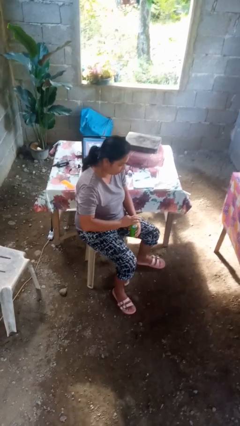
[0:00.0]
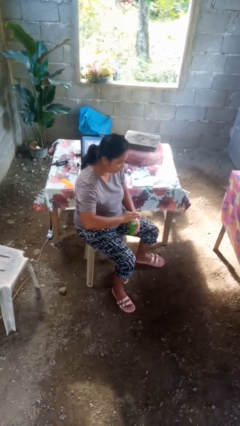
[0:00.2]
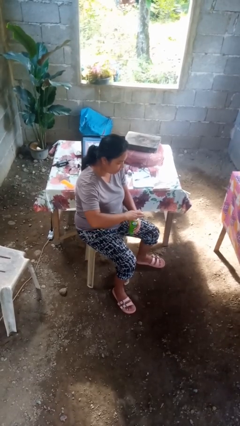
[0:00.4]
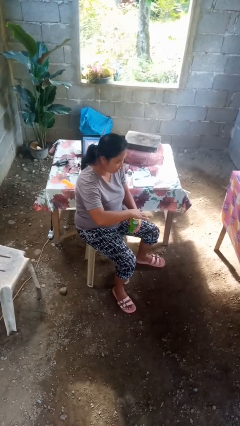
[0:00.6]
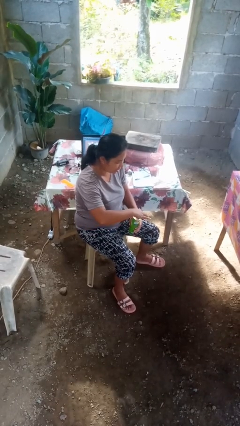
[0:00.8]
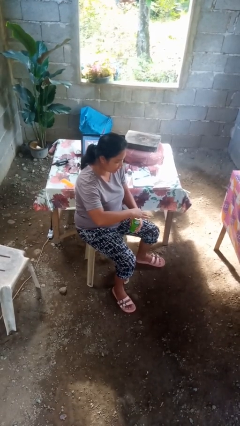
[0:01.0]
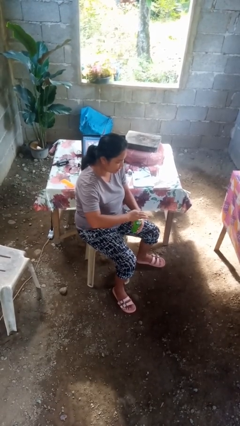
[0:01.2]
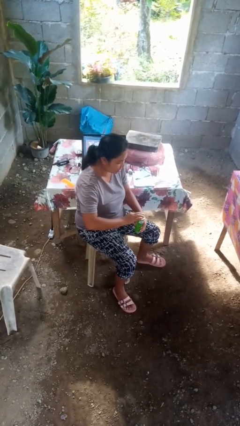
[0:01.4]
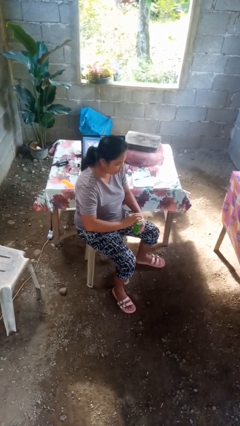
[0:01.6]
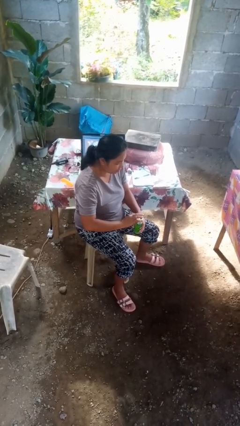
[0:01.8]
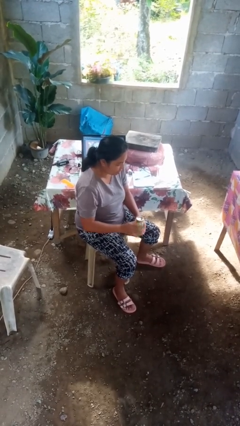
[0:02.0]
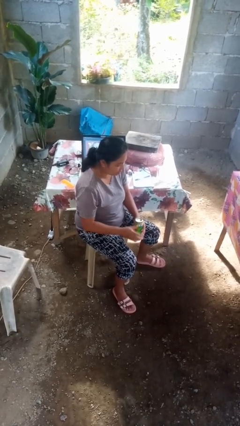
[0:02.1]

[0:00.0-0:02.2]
person opens beverage can

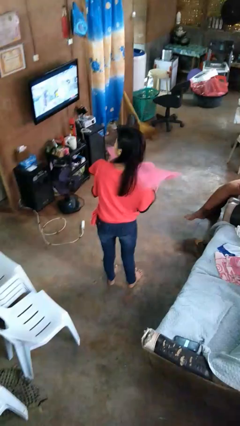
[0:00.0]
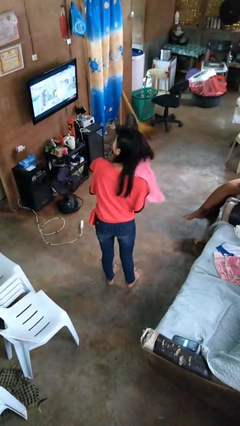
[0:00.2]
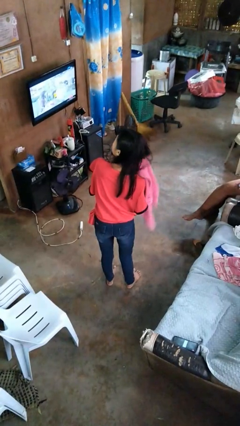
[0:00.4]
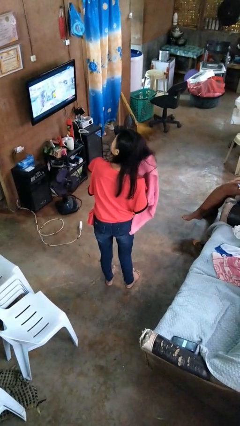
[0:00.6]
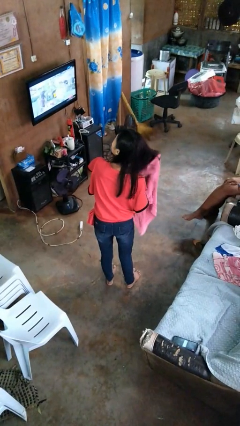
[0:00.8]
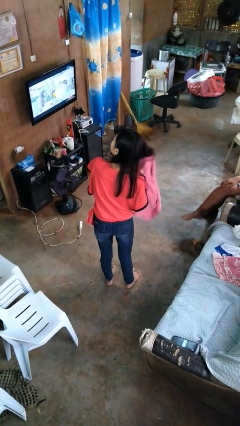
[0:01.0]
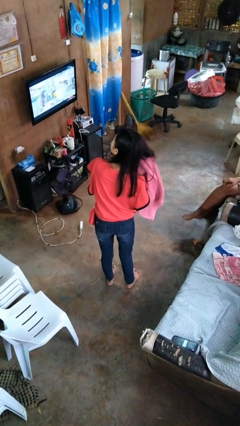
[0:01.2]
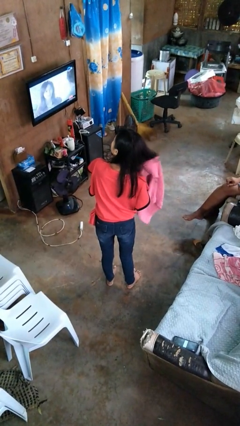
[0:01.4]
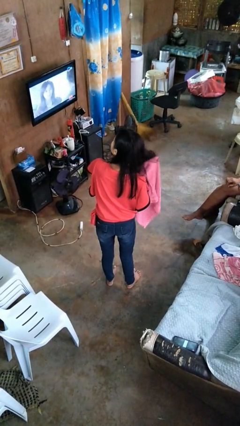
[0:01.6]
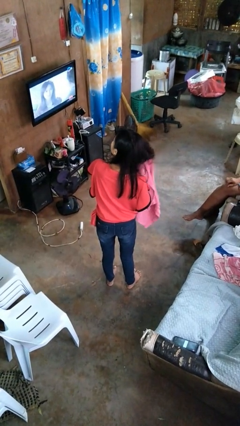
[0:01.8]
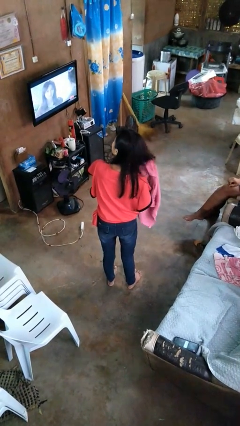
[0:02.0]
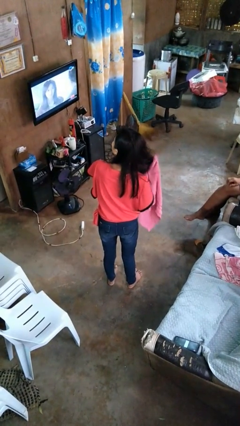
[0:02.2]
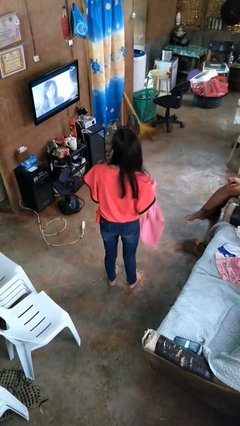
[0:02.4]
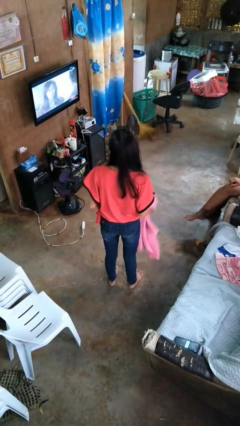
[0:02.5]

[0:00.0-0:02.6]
person dries hair with towel

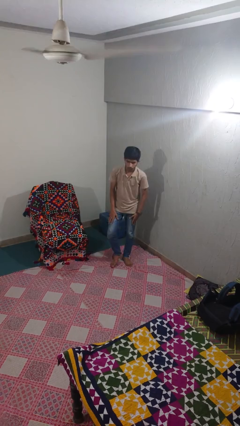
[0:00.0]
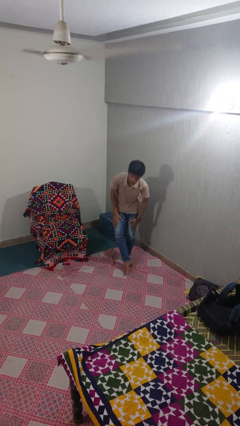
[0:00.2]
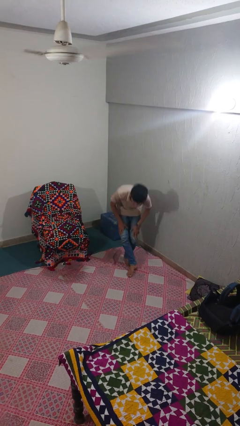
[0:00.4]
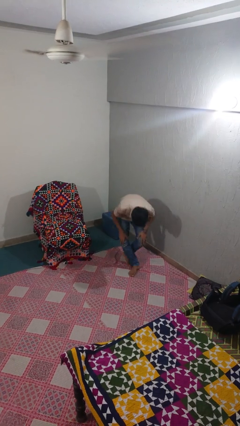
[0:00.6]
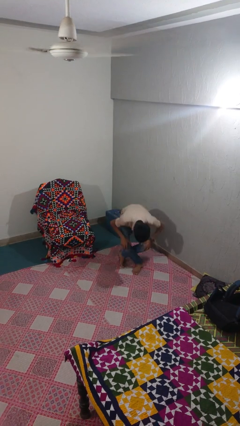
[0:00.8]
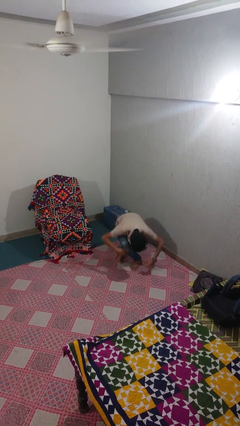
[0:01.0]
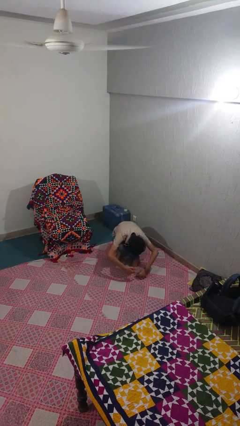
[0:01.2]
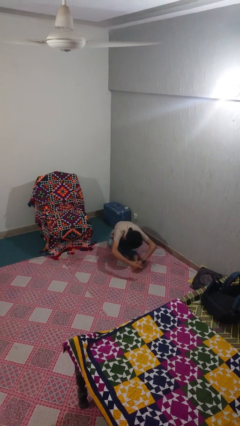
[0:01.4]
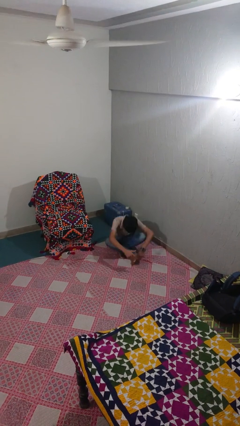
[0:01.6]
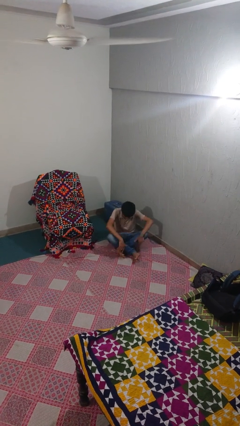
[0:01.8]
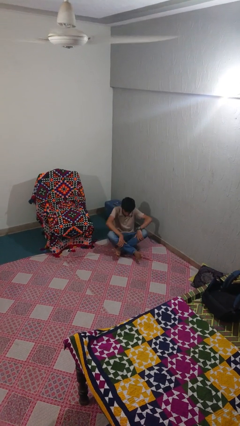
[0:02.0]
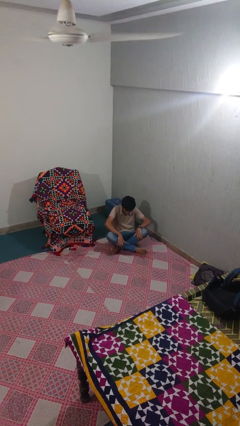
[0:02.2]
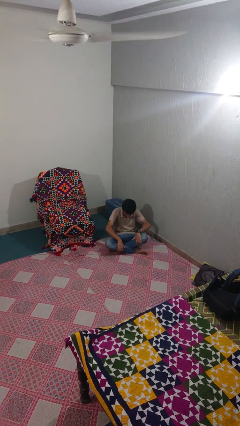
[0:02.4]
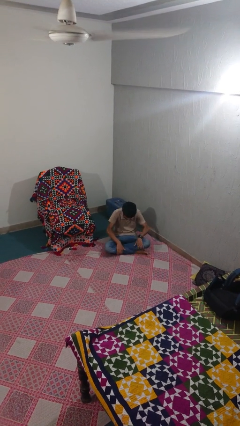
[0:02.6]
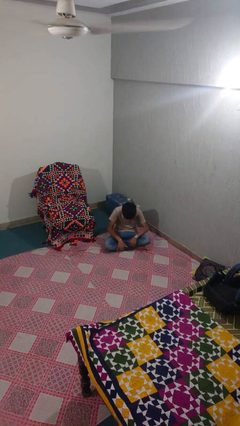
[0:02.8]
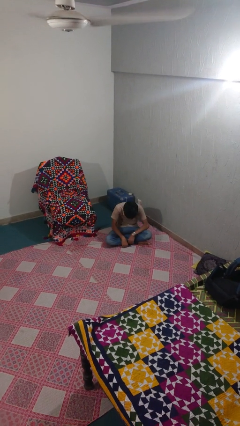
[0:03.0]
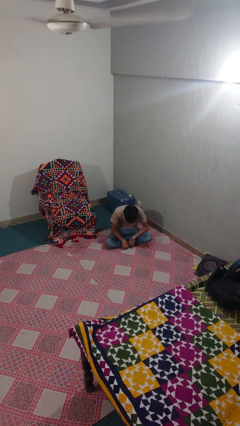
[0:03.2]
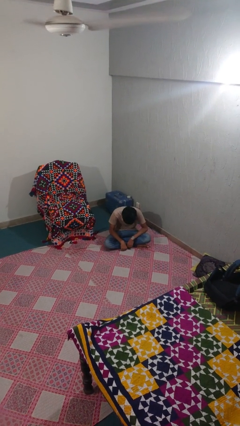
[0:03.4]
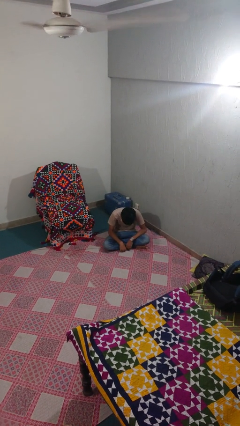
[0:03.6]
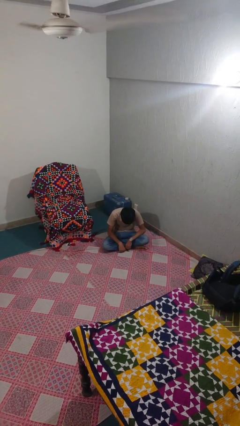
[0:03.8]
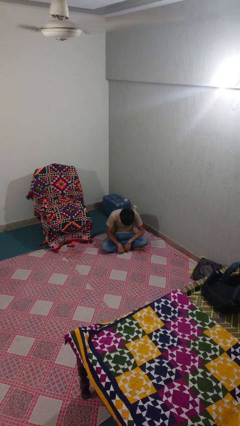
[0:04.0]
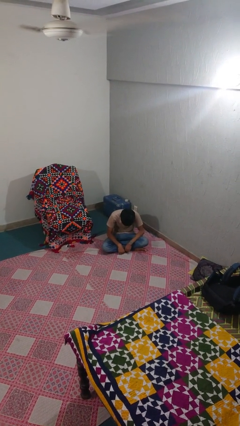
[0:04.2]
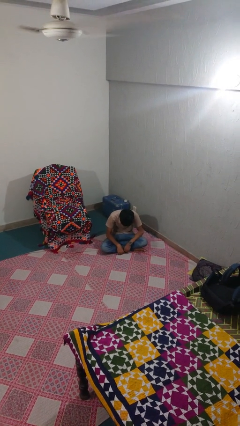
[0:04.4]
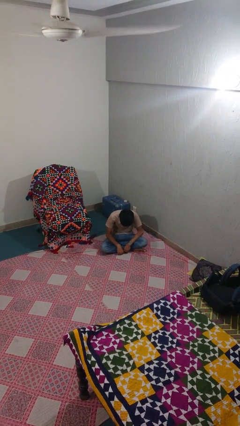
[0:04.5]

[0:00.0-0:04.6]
person sits crisscross

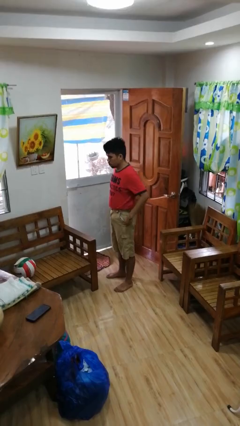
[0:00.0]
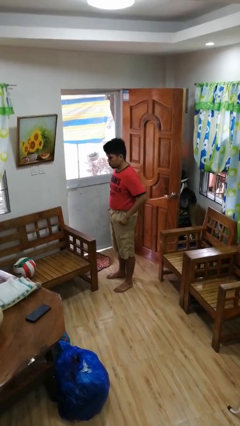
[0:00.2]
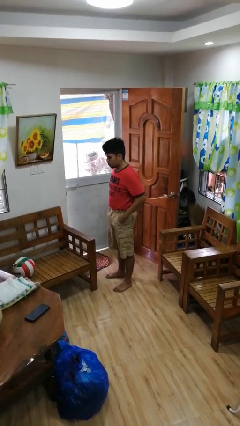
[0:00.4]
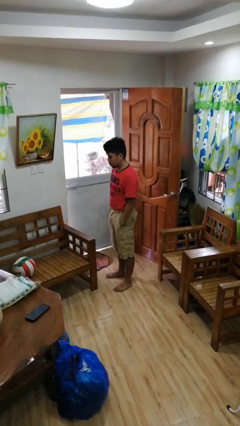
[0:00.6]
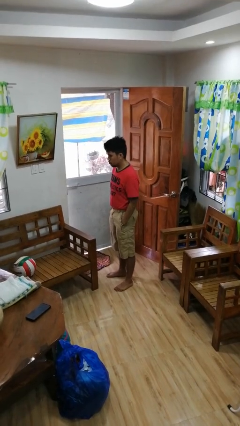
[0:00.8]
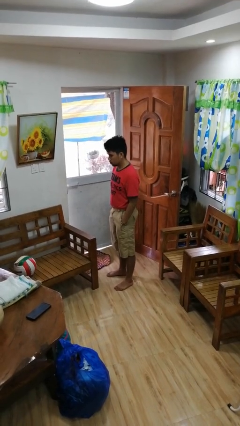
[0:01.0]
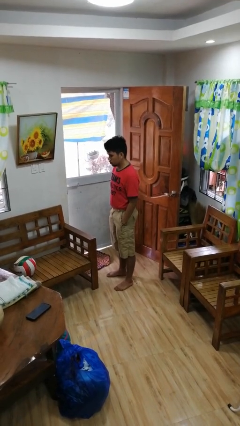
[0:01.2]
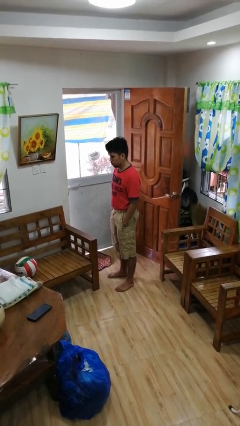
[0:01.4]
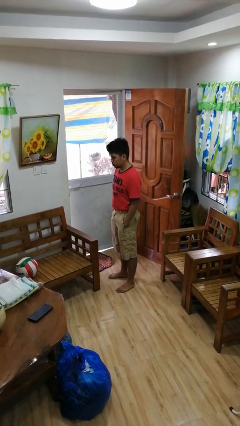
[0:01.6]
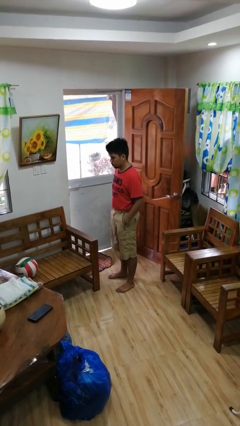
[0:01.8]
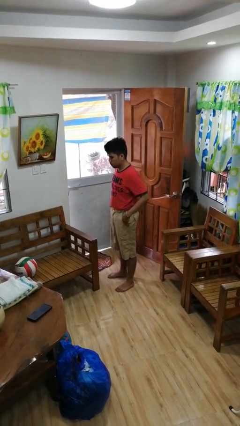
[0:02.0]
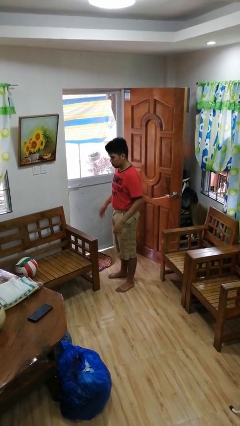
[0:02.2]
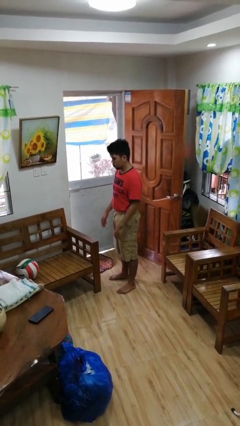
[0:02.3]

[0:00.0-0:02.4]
person puts hands in back pockets

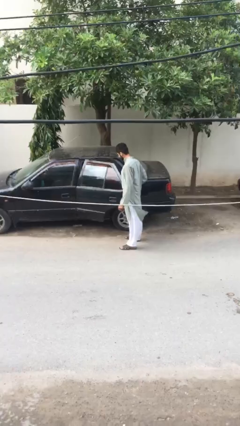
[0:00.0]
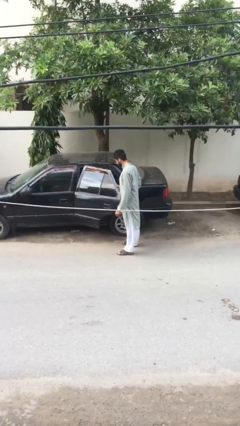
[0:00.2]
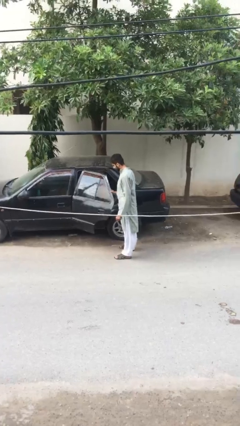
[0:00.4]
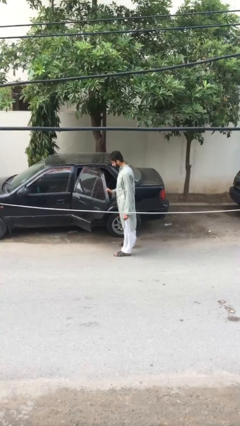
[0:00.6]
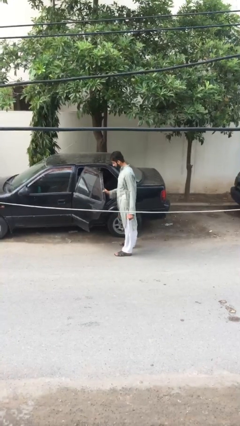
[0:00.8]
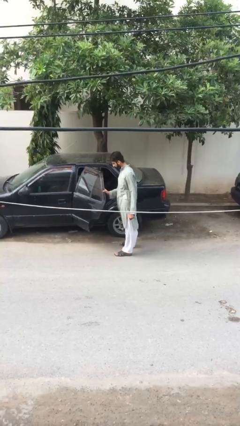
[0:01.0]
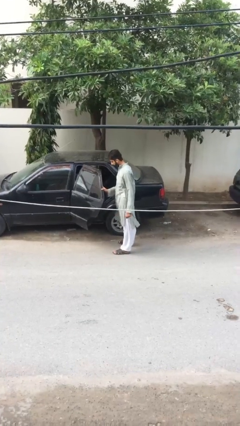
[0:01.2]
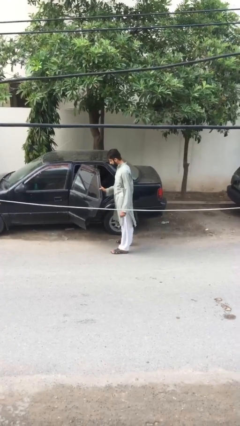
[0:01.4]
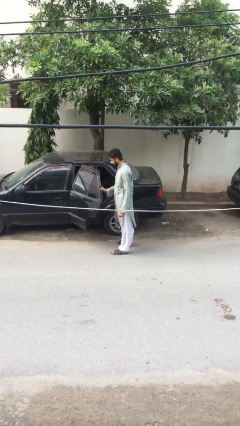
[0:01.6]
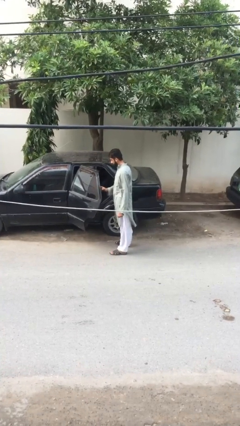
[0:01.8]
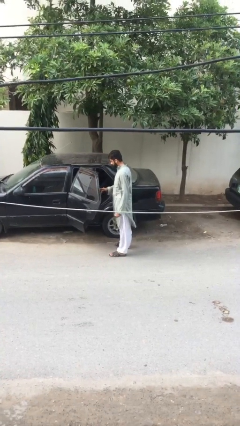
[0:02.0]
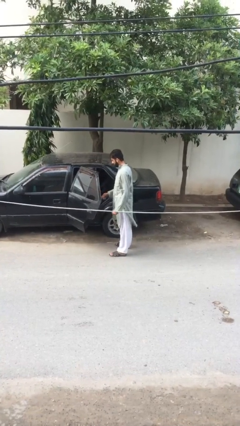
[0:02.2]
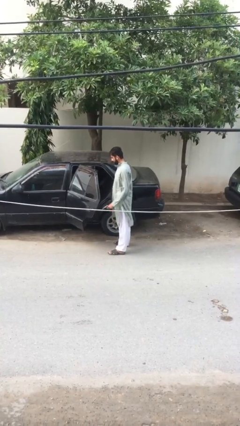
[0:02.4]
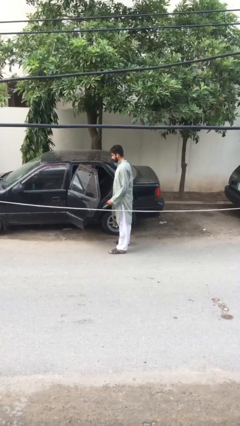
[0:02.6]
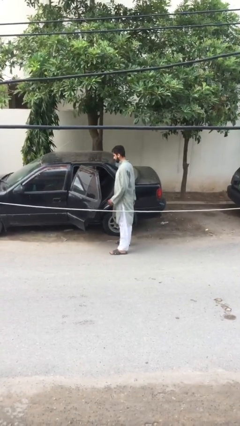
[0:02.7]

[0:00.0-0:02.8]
person opens car door

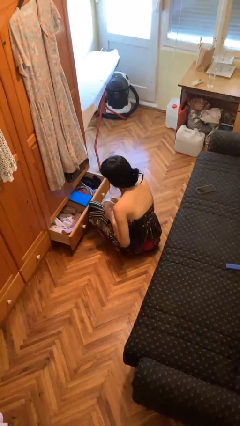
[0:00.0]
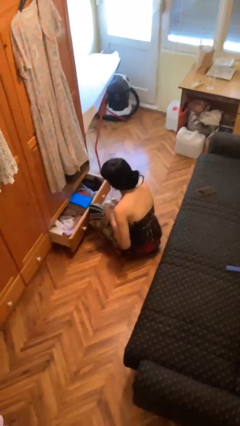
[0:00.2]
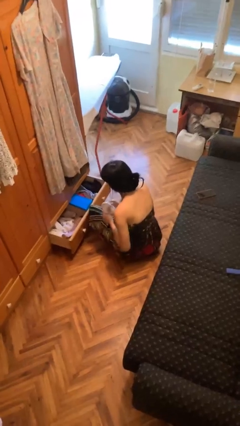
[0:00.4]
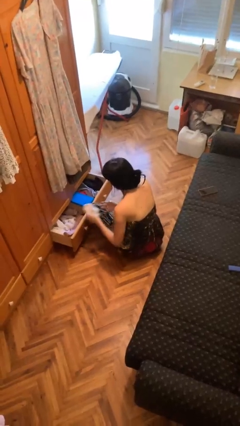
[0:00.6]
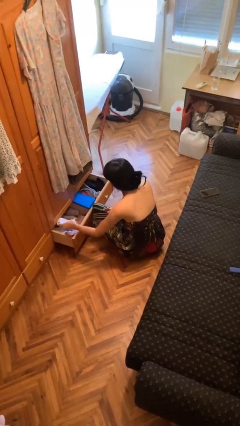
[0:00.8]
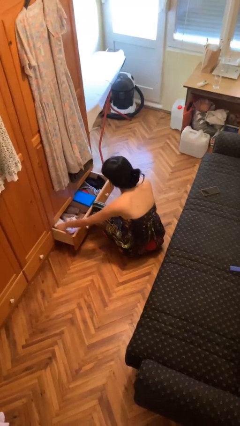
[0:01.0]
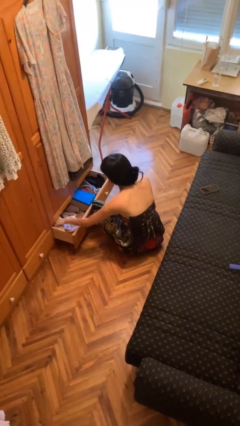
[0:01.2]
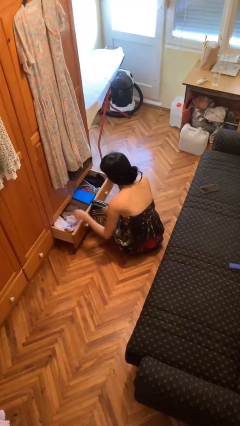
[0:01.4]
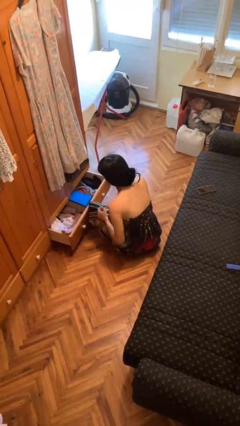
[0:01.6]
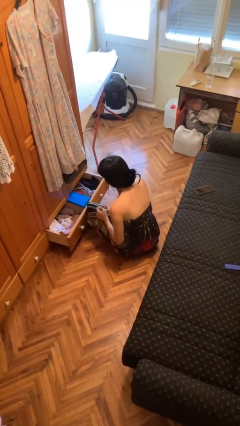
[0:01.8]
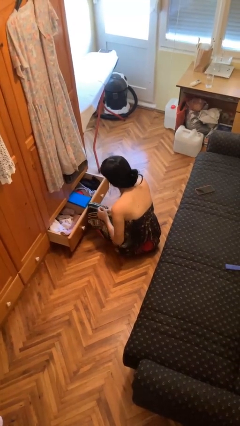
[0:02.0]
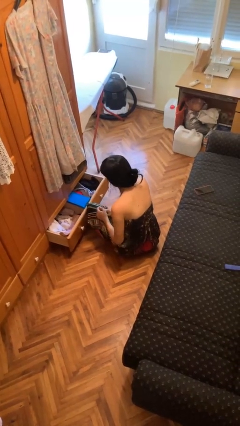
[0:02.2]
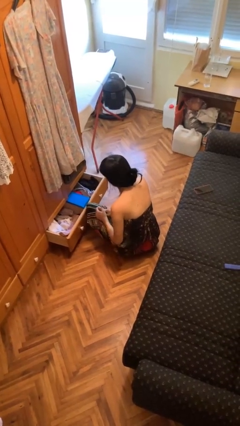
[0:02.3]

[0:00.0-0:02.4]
person puts clothes into dresser
